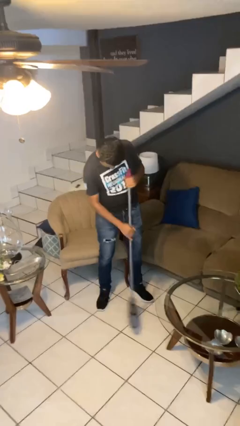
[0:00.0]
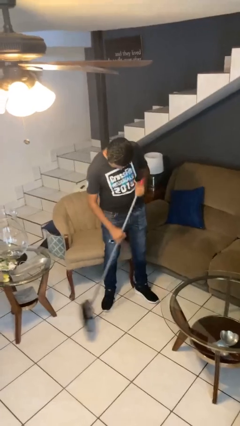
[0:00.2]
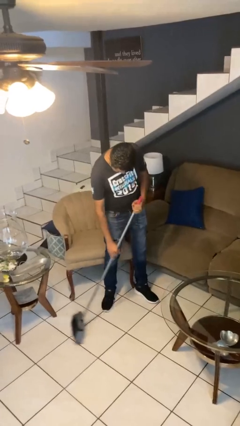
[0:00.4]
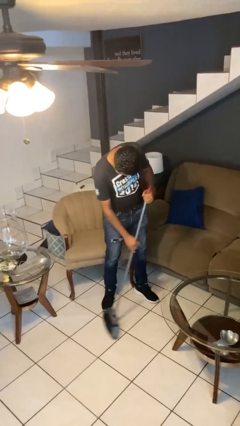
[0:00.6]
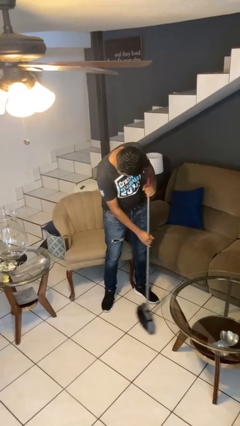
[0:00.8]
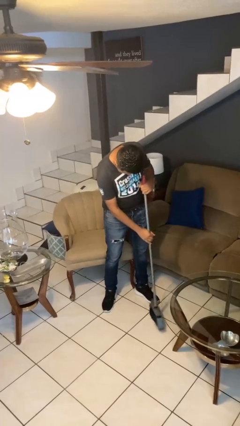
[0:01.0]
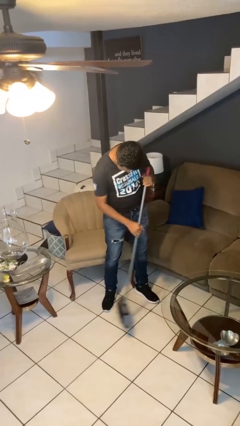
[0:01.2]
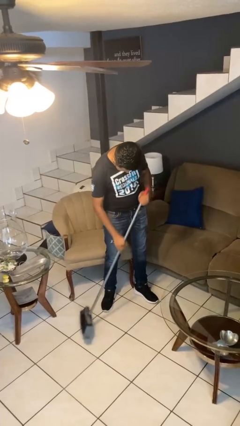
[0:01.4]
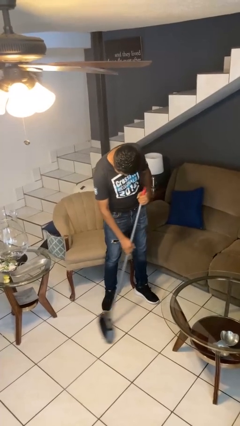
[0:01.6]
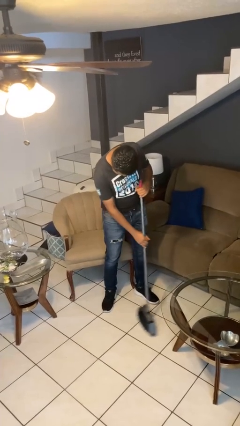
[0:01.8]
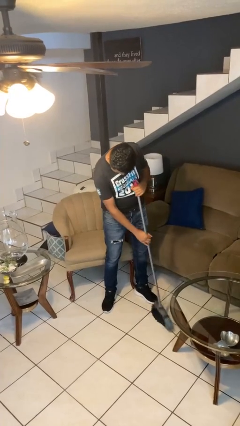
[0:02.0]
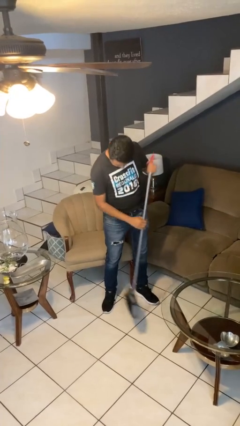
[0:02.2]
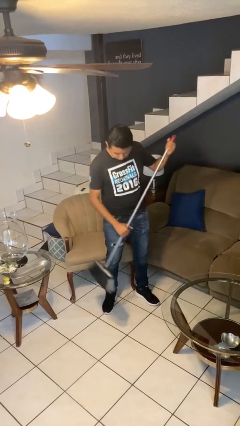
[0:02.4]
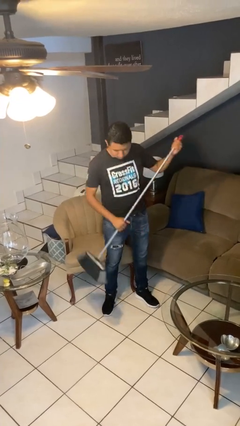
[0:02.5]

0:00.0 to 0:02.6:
person sweeps floor

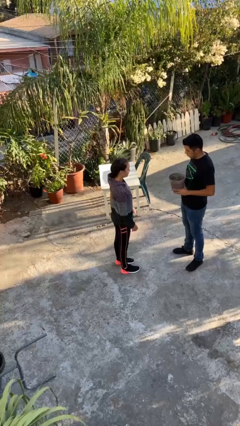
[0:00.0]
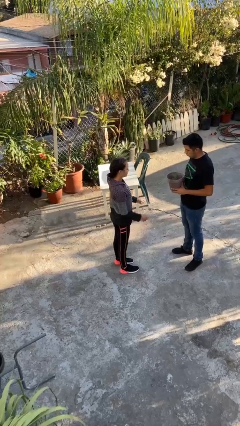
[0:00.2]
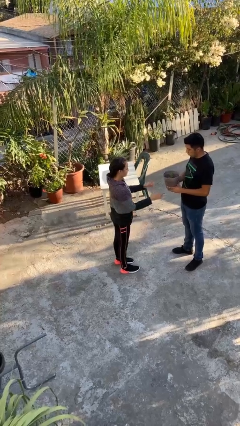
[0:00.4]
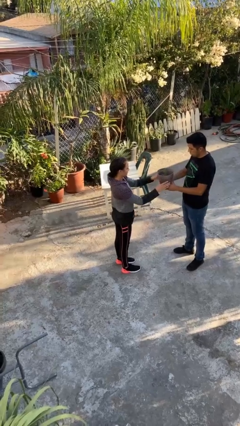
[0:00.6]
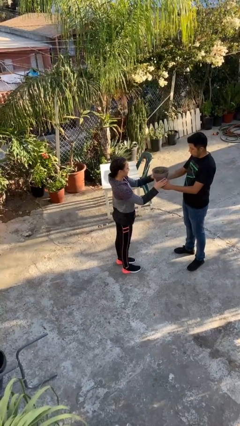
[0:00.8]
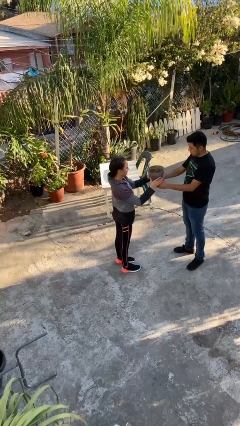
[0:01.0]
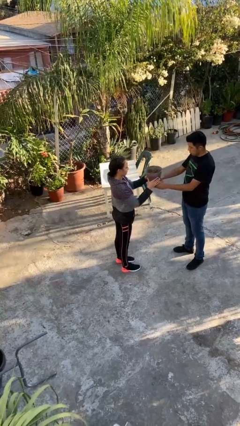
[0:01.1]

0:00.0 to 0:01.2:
person transfers object to person

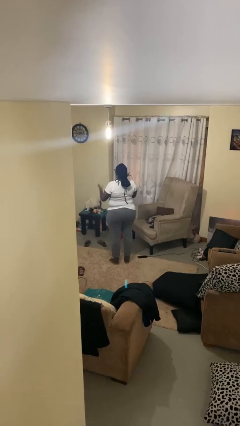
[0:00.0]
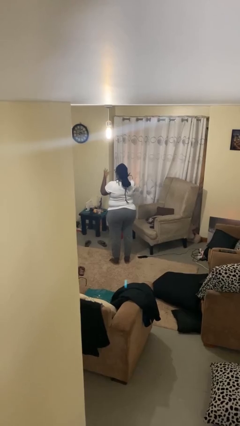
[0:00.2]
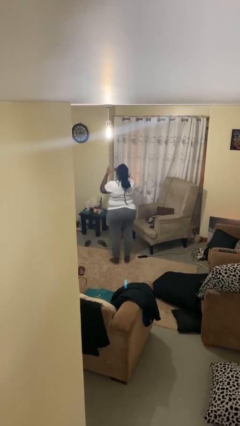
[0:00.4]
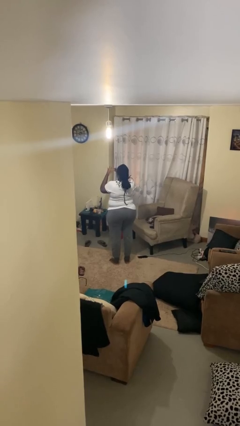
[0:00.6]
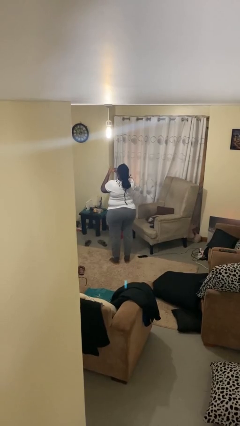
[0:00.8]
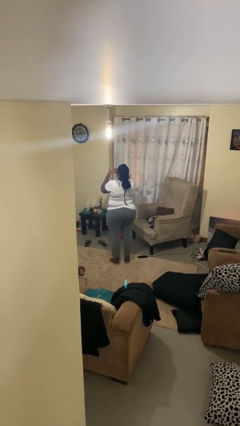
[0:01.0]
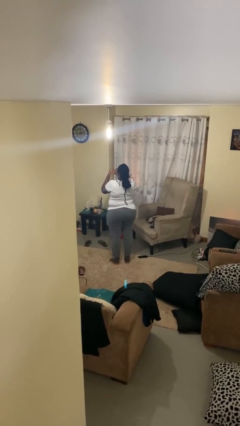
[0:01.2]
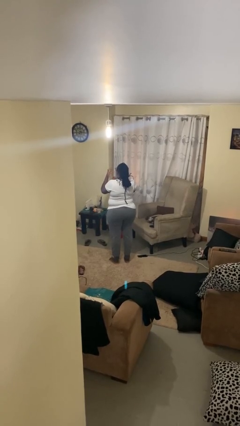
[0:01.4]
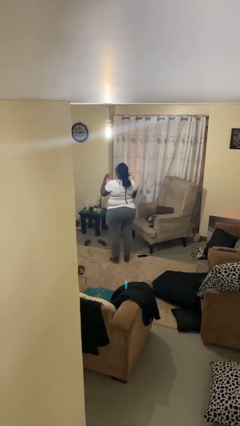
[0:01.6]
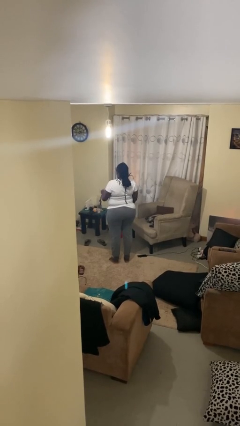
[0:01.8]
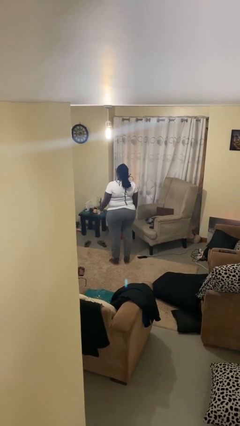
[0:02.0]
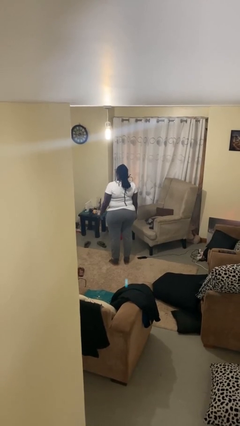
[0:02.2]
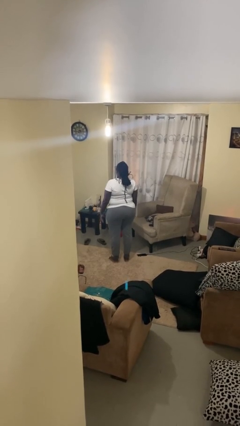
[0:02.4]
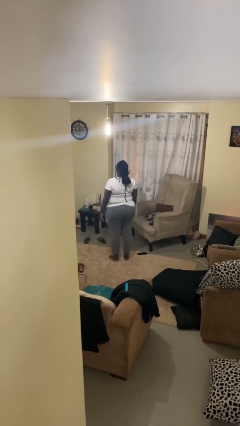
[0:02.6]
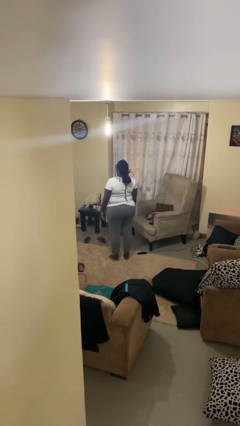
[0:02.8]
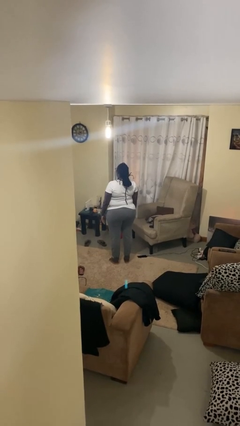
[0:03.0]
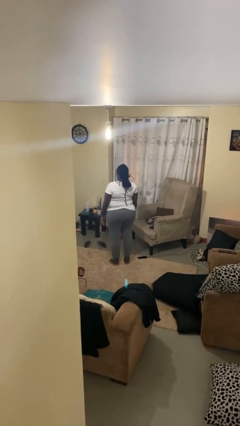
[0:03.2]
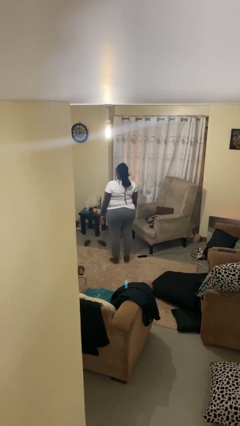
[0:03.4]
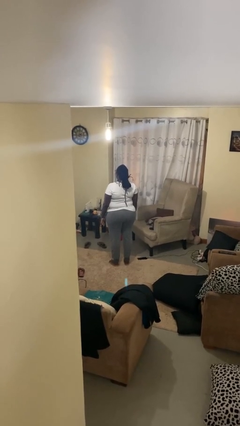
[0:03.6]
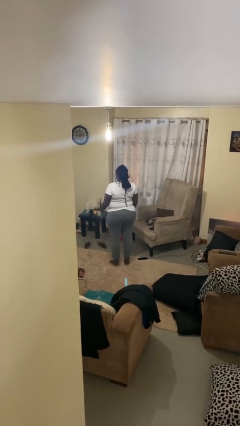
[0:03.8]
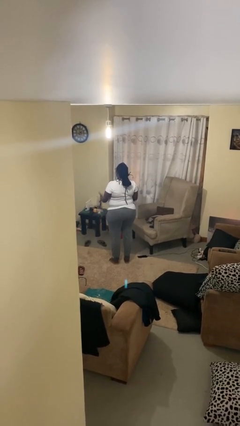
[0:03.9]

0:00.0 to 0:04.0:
person puts on ring

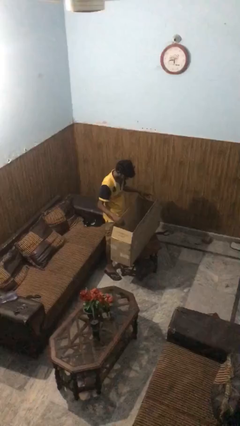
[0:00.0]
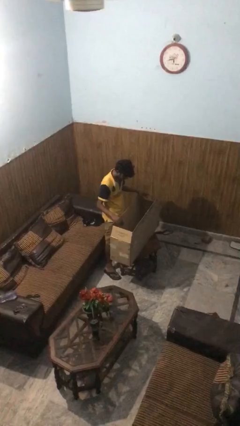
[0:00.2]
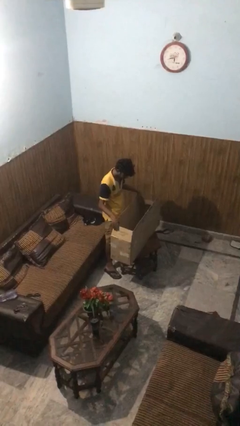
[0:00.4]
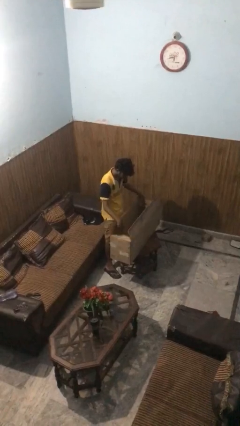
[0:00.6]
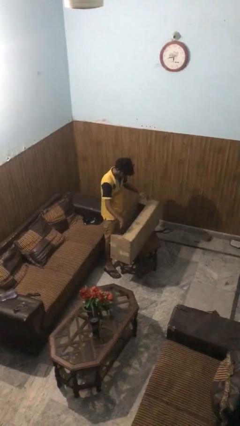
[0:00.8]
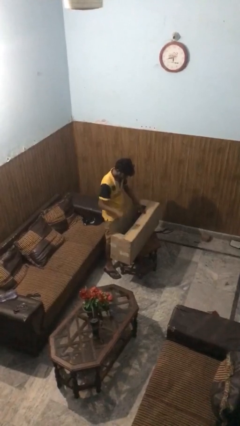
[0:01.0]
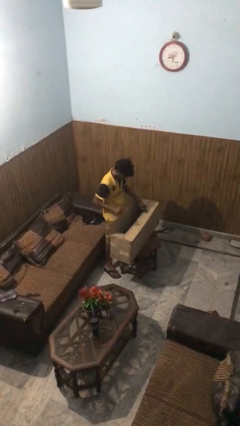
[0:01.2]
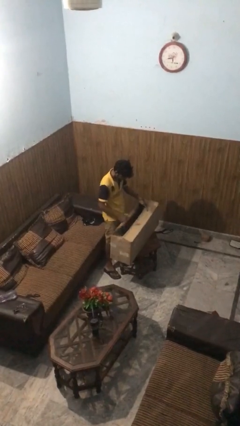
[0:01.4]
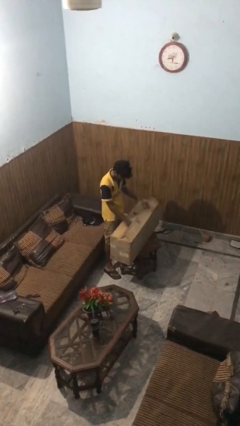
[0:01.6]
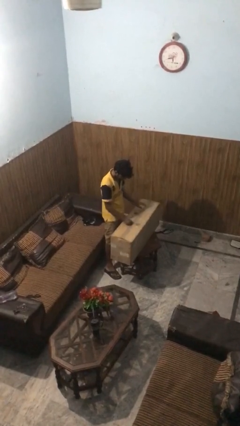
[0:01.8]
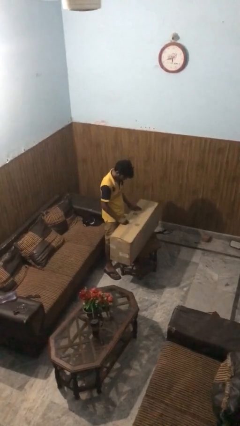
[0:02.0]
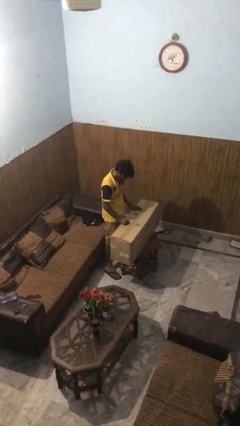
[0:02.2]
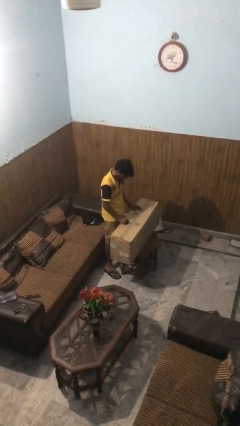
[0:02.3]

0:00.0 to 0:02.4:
person closes box

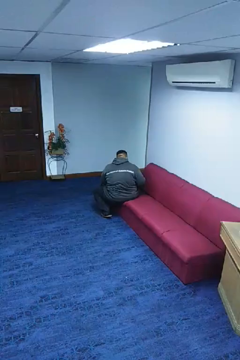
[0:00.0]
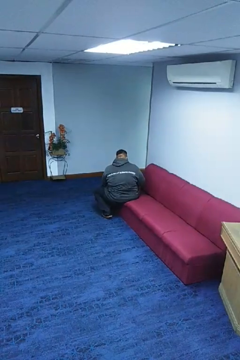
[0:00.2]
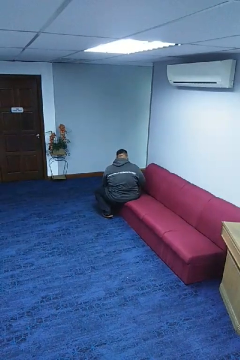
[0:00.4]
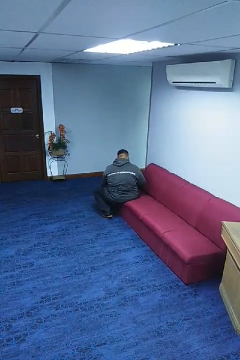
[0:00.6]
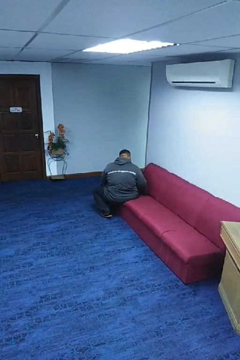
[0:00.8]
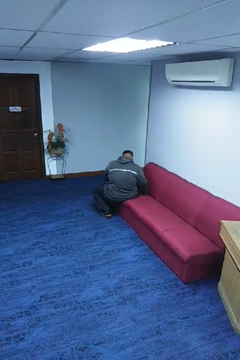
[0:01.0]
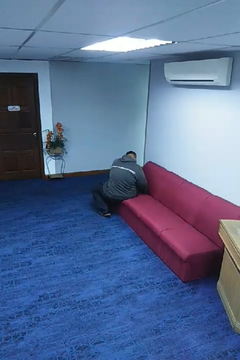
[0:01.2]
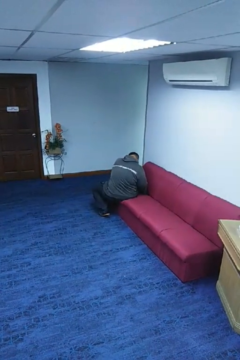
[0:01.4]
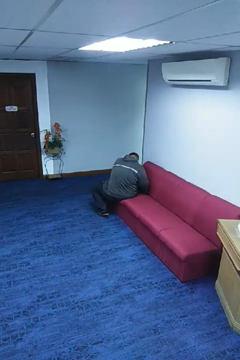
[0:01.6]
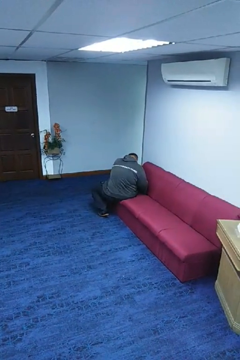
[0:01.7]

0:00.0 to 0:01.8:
person searches in couch

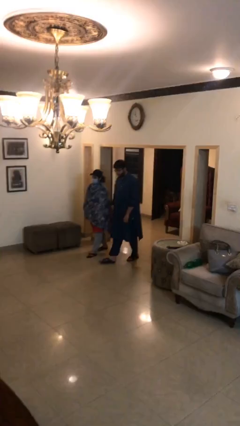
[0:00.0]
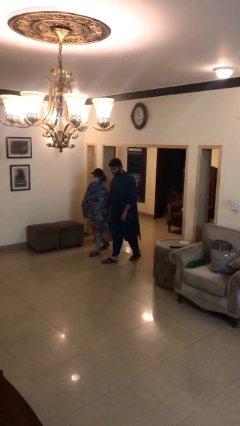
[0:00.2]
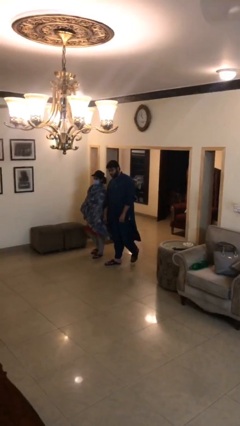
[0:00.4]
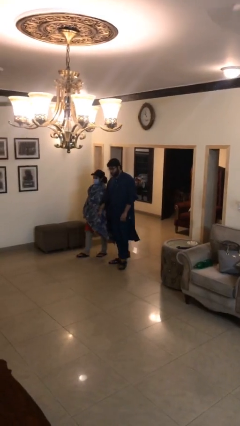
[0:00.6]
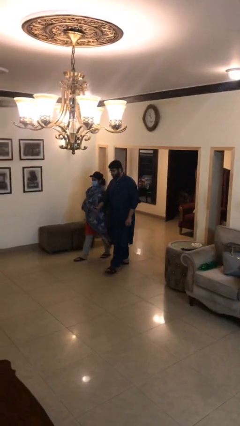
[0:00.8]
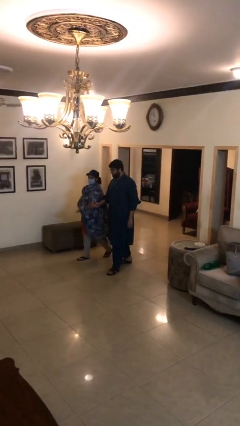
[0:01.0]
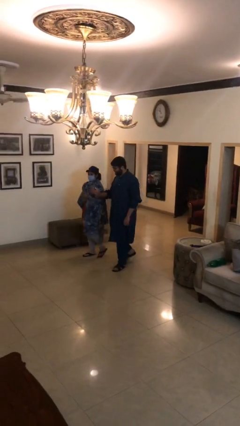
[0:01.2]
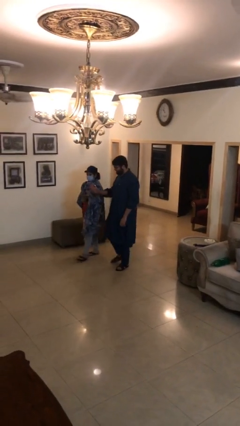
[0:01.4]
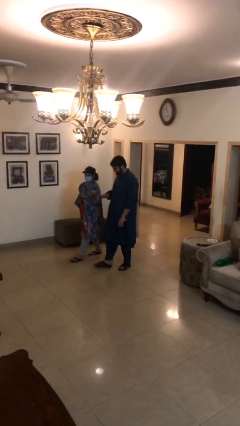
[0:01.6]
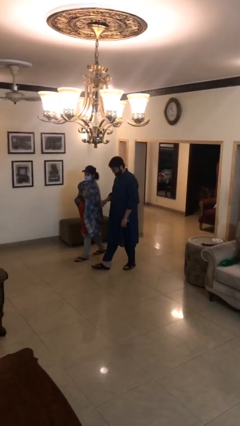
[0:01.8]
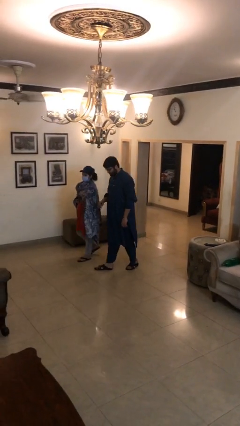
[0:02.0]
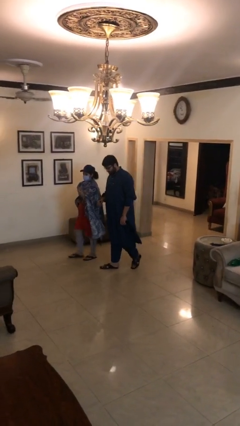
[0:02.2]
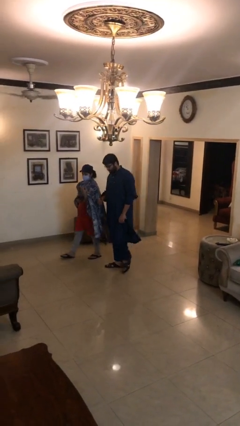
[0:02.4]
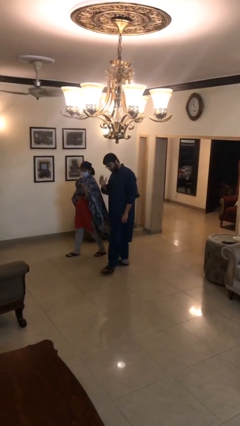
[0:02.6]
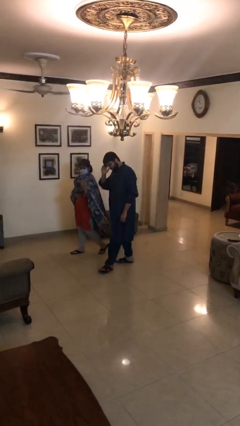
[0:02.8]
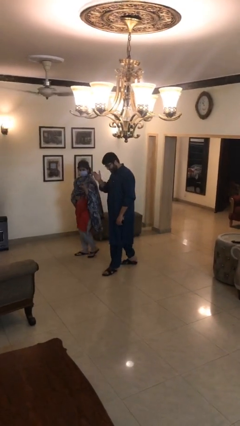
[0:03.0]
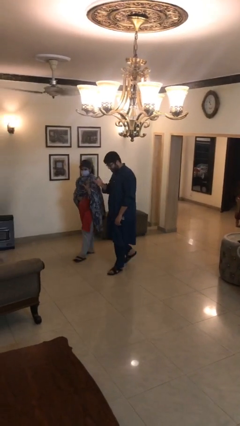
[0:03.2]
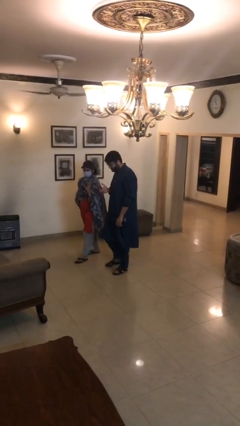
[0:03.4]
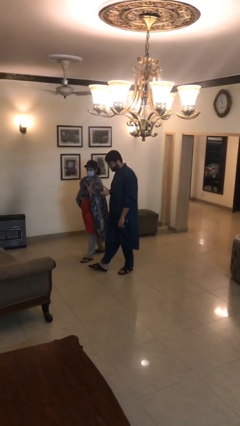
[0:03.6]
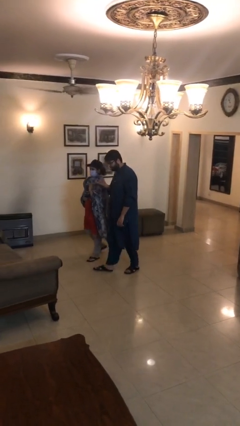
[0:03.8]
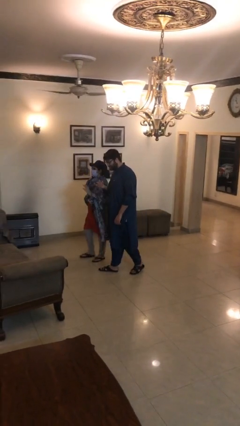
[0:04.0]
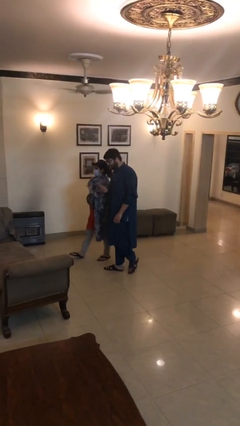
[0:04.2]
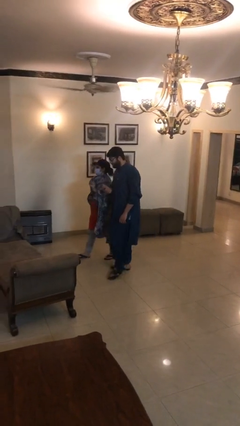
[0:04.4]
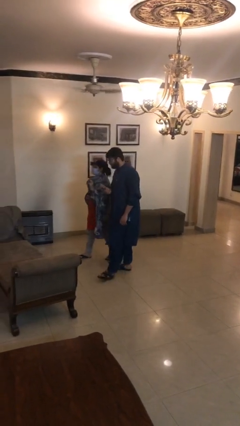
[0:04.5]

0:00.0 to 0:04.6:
person talks to person

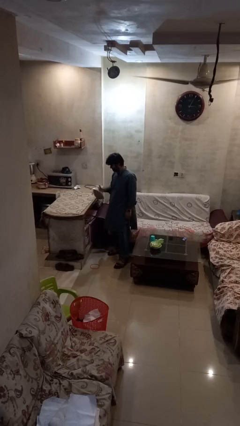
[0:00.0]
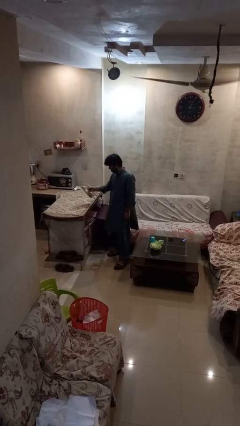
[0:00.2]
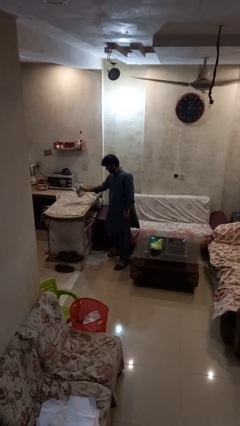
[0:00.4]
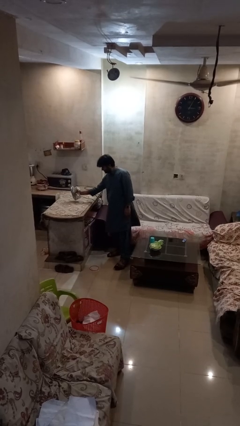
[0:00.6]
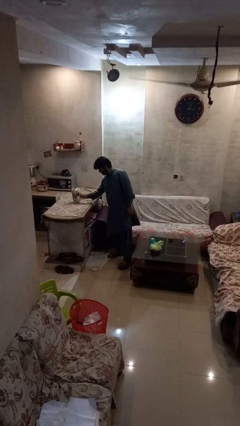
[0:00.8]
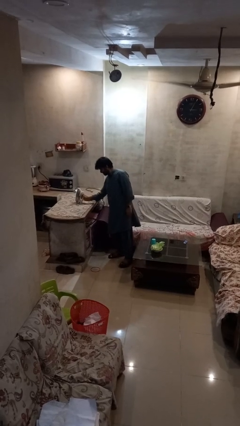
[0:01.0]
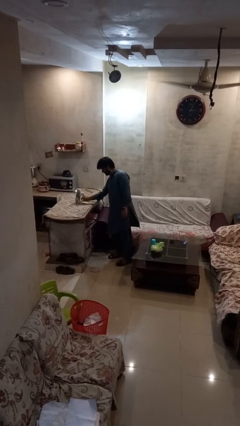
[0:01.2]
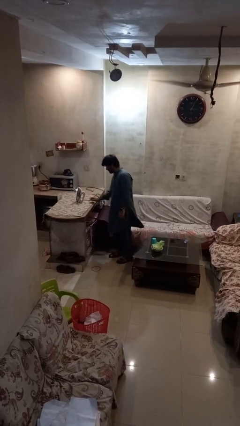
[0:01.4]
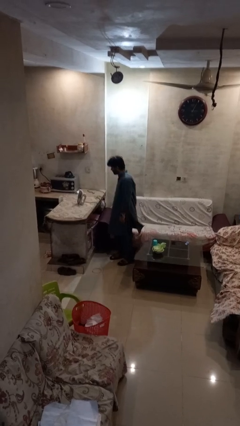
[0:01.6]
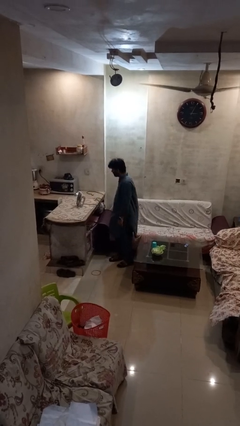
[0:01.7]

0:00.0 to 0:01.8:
person puts down object on countertop
